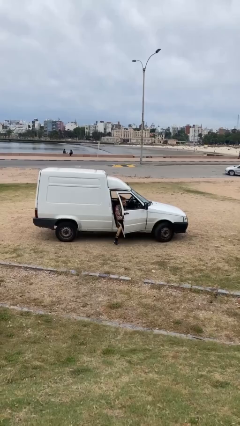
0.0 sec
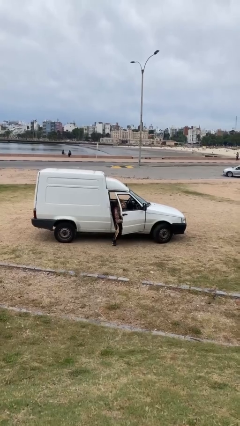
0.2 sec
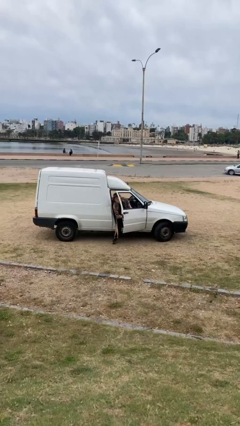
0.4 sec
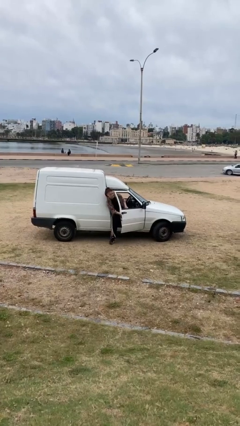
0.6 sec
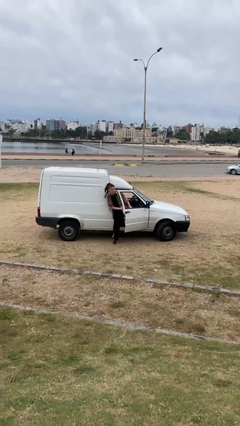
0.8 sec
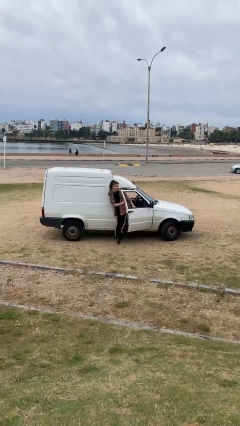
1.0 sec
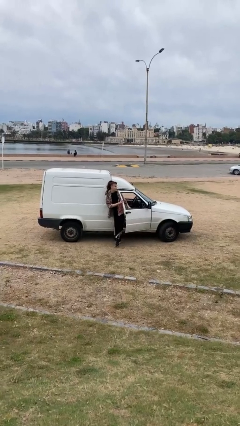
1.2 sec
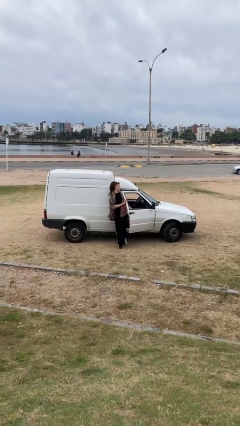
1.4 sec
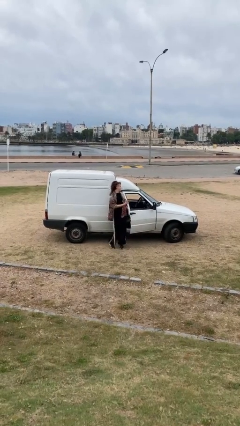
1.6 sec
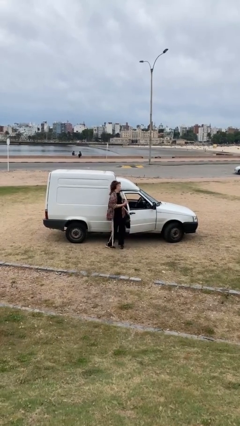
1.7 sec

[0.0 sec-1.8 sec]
person exits car

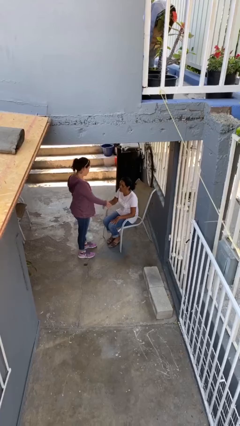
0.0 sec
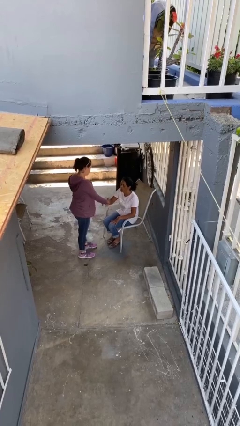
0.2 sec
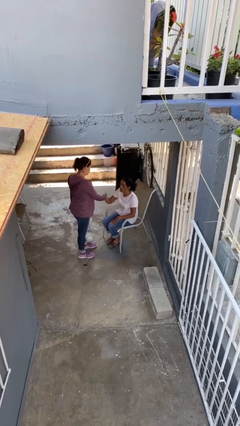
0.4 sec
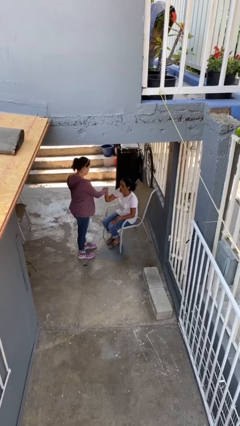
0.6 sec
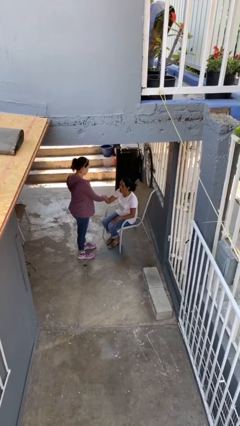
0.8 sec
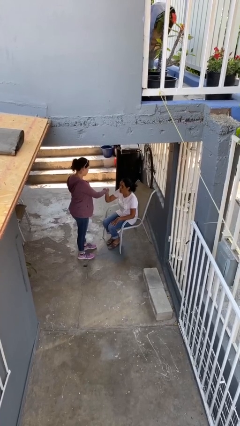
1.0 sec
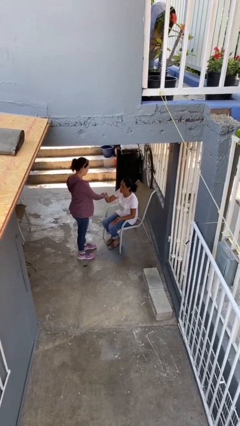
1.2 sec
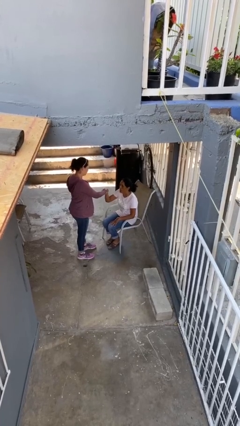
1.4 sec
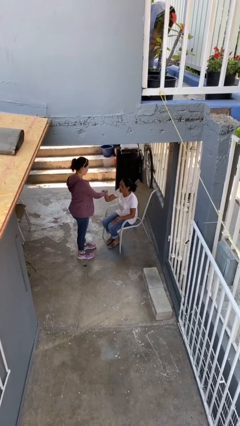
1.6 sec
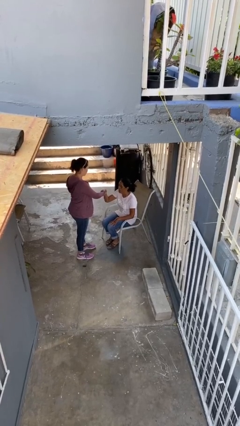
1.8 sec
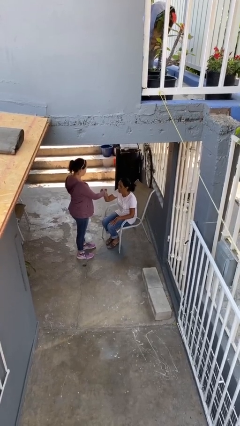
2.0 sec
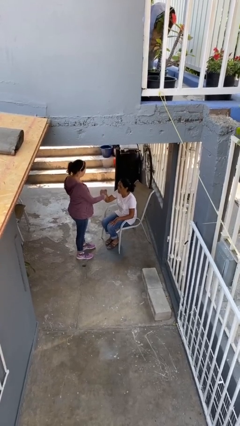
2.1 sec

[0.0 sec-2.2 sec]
person shakes hand

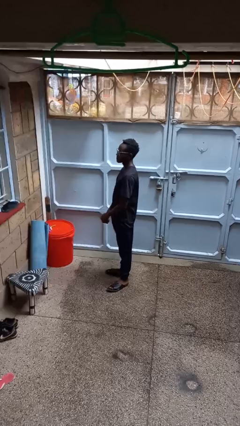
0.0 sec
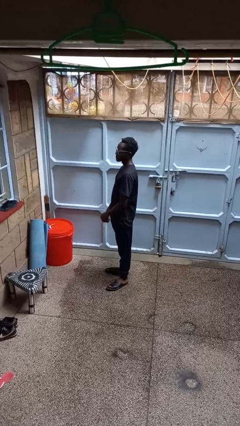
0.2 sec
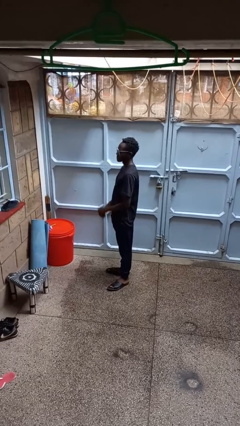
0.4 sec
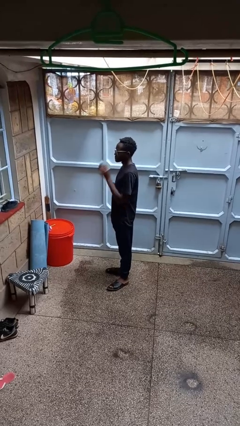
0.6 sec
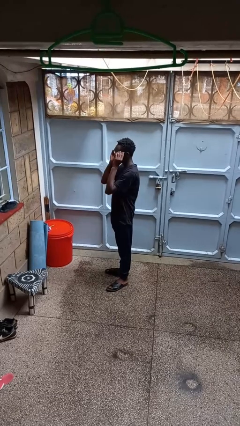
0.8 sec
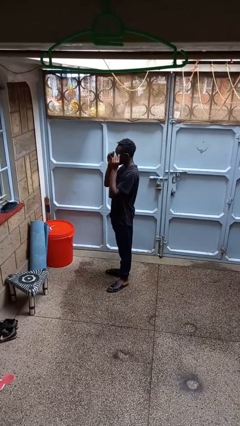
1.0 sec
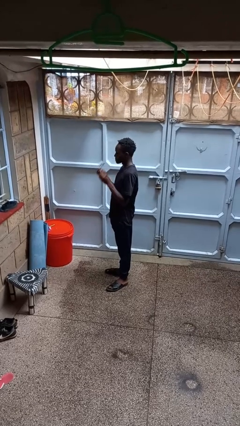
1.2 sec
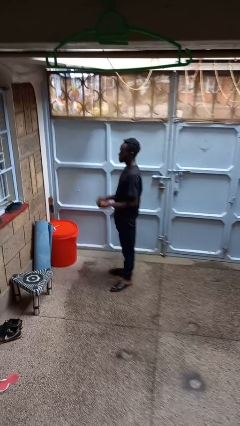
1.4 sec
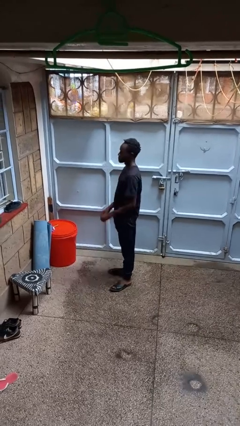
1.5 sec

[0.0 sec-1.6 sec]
person takes off glasses

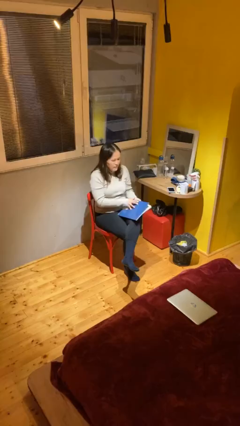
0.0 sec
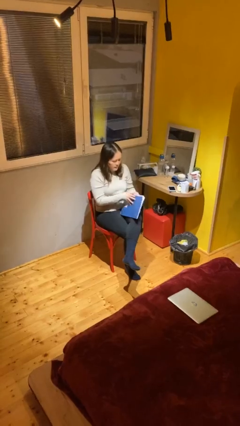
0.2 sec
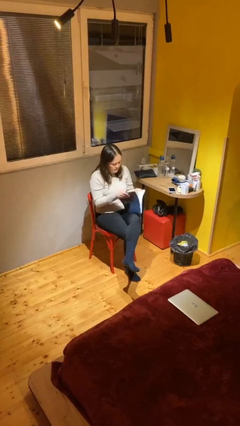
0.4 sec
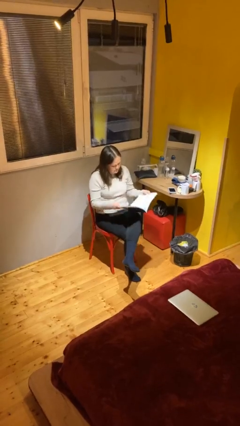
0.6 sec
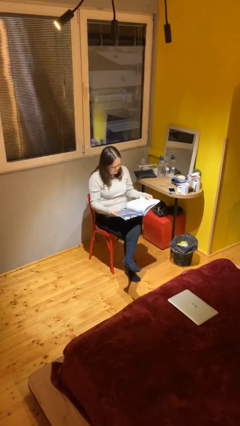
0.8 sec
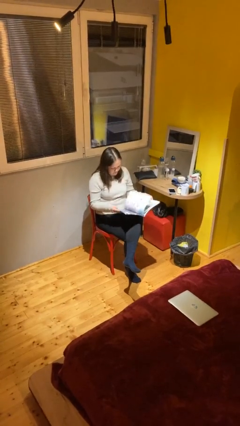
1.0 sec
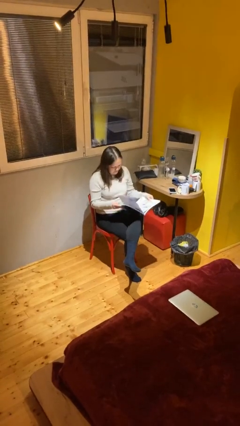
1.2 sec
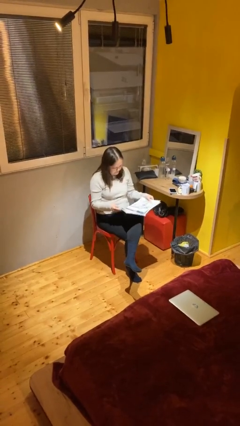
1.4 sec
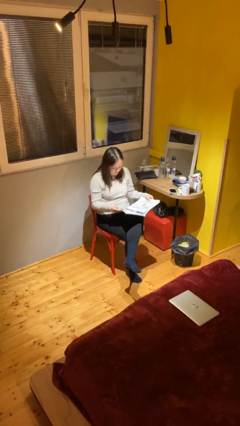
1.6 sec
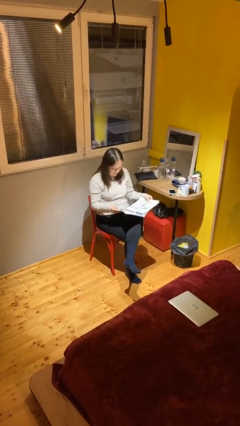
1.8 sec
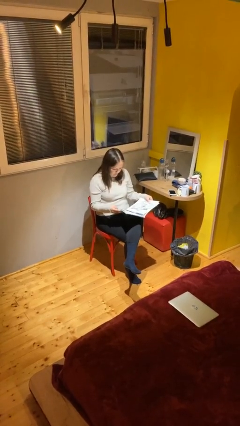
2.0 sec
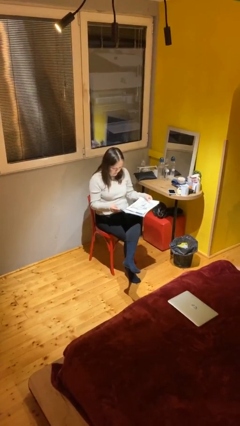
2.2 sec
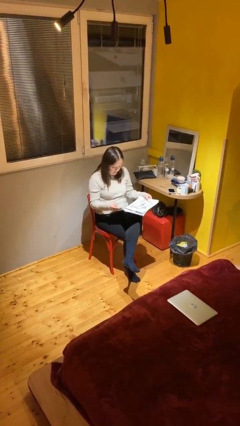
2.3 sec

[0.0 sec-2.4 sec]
person reads document

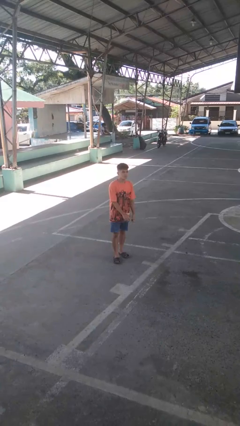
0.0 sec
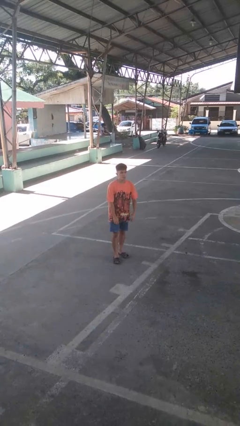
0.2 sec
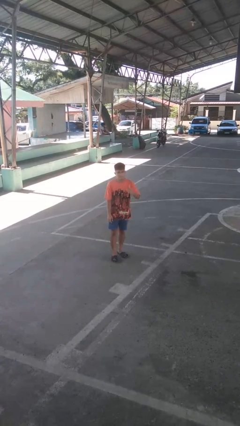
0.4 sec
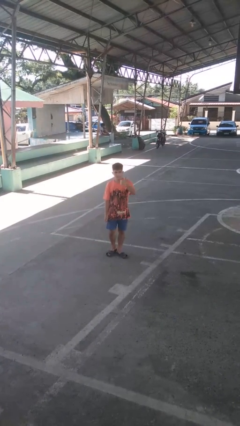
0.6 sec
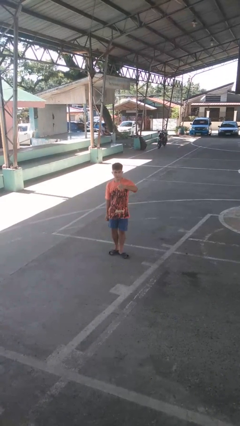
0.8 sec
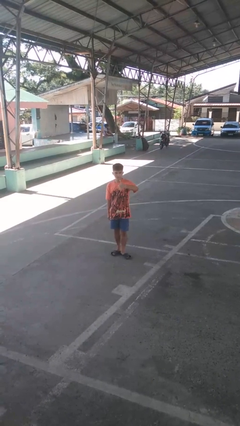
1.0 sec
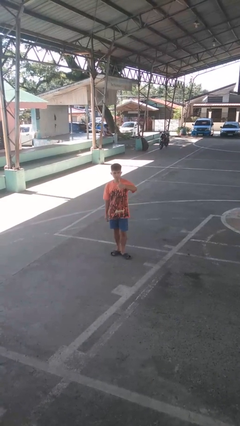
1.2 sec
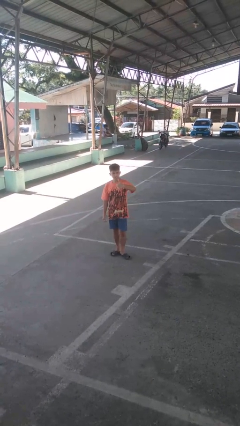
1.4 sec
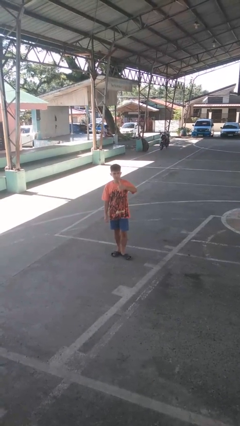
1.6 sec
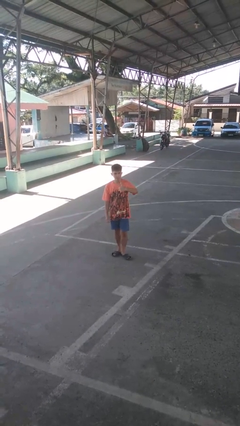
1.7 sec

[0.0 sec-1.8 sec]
person gestures thumbs up

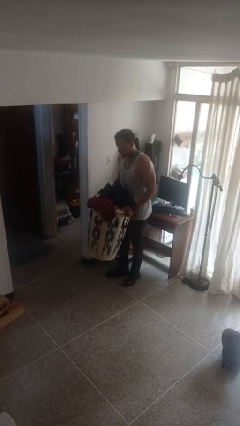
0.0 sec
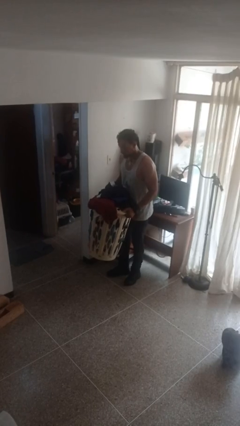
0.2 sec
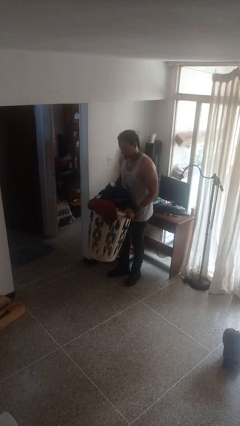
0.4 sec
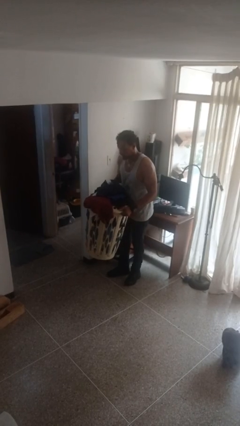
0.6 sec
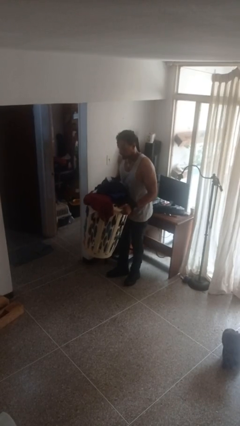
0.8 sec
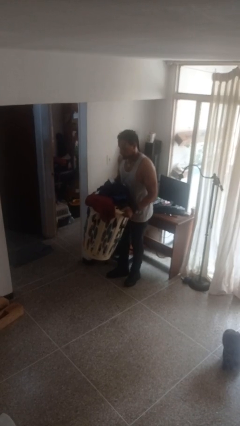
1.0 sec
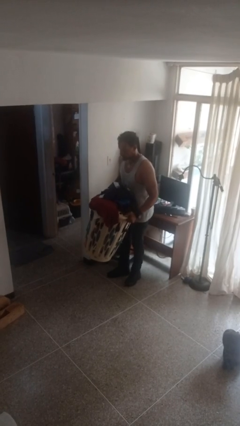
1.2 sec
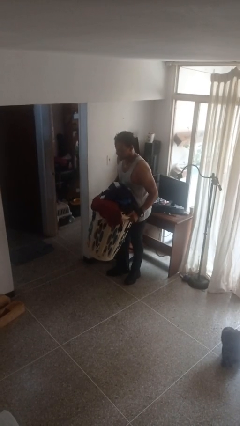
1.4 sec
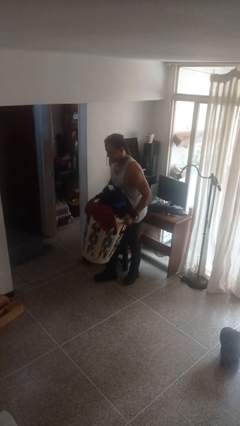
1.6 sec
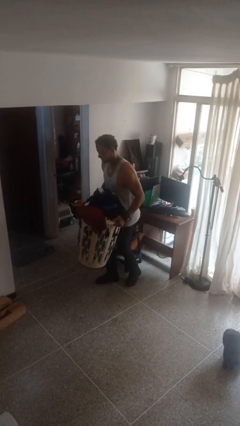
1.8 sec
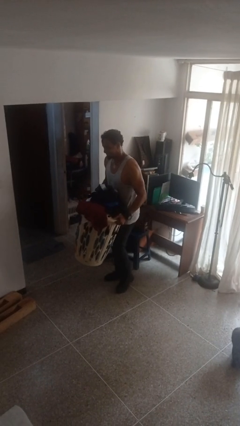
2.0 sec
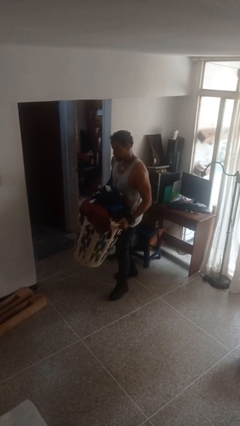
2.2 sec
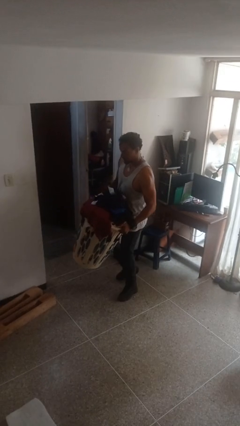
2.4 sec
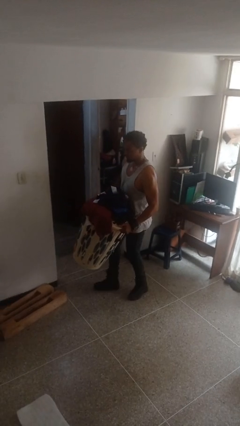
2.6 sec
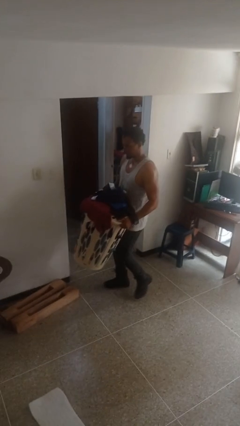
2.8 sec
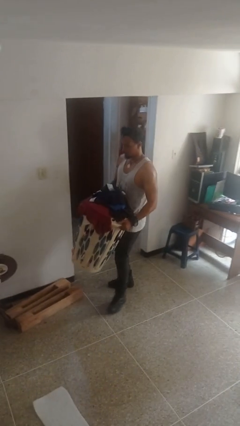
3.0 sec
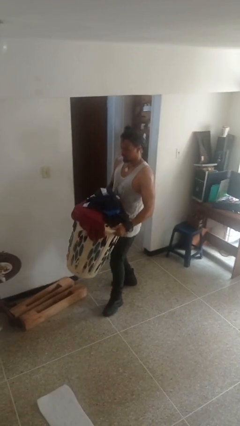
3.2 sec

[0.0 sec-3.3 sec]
person carries laundry basket

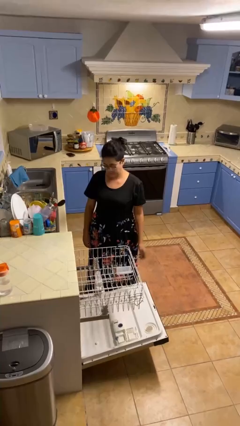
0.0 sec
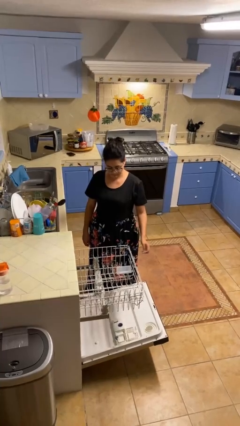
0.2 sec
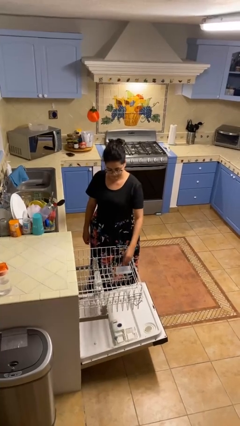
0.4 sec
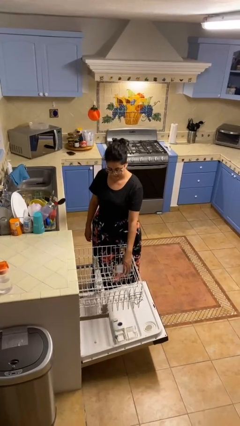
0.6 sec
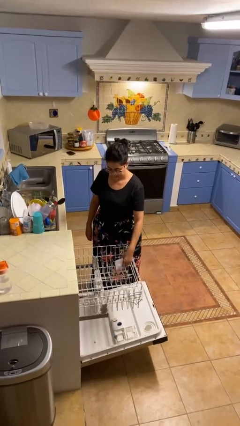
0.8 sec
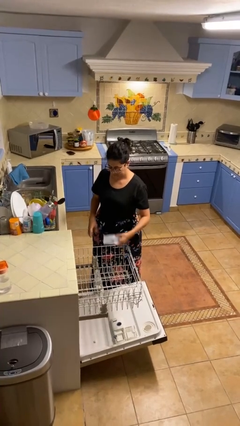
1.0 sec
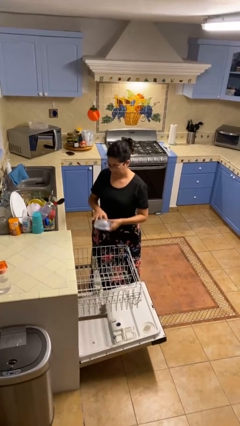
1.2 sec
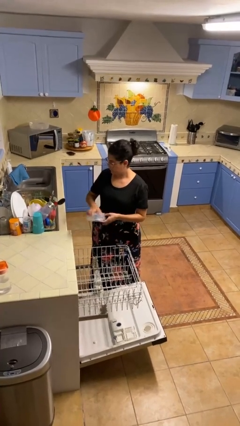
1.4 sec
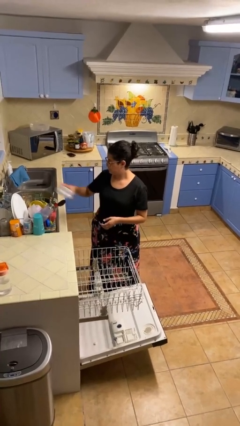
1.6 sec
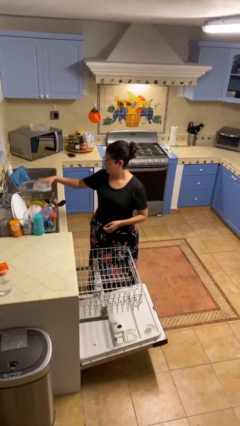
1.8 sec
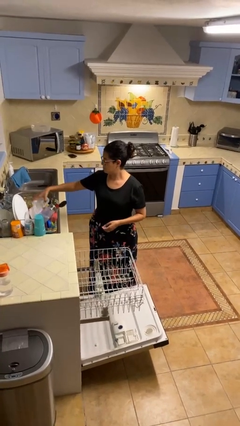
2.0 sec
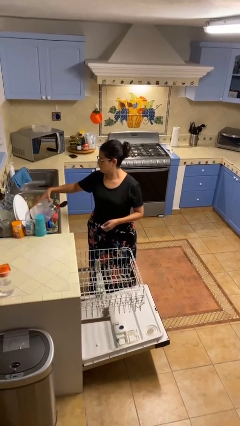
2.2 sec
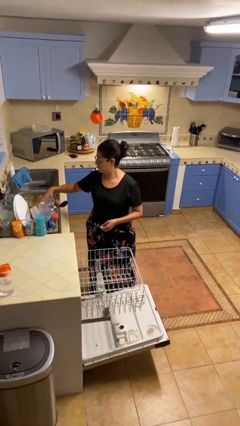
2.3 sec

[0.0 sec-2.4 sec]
person unloads dishwasher

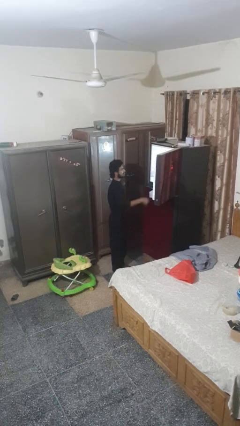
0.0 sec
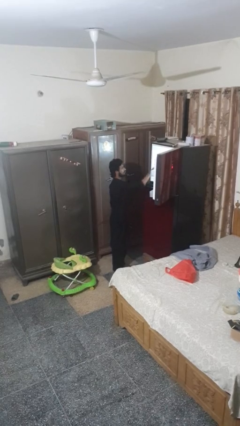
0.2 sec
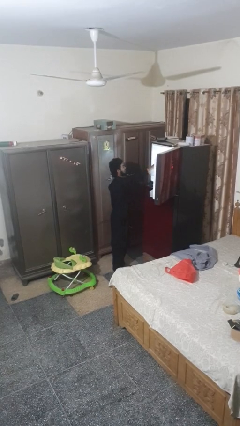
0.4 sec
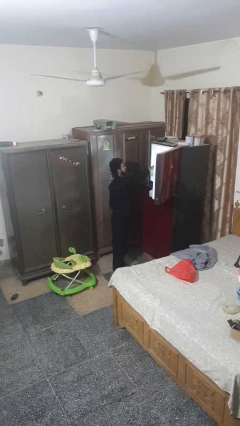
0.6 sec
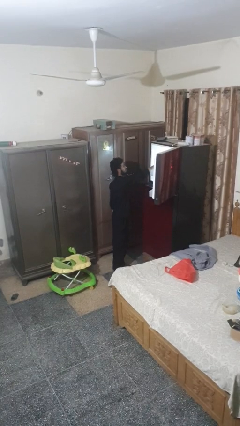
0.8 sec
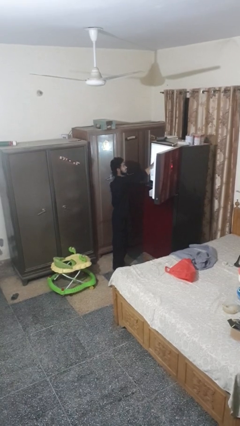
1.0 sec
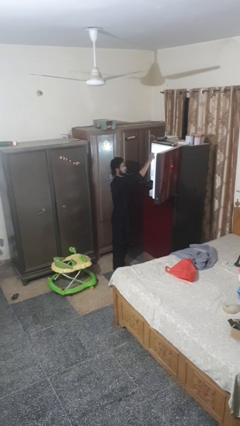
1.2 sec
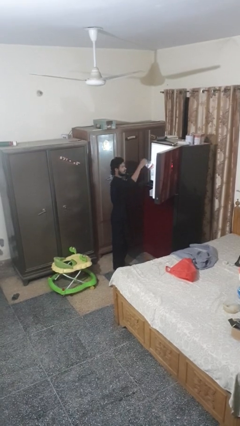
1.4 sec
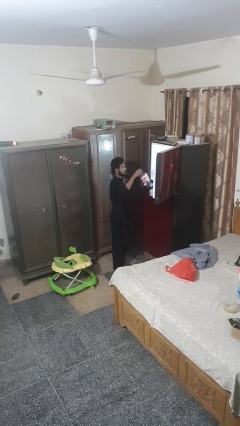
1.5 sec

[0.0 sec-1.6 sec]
person takes object from refrigerator

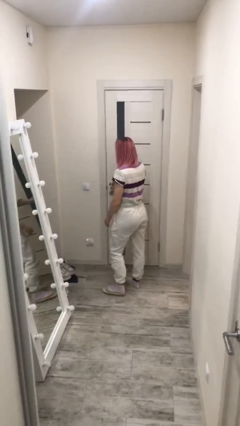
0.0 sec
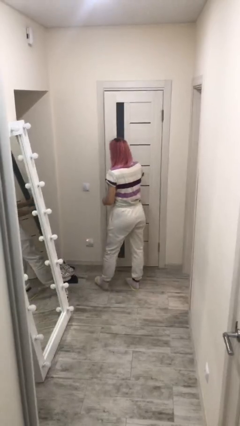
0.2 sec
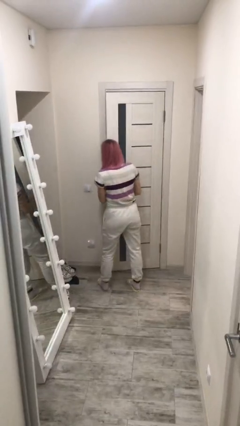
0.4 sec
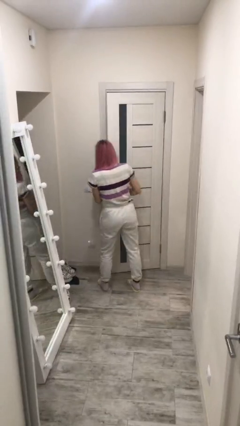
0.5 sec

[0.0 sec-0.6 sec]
person opens facility door
